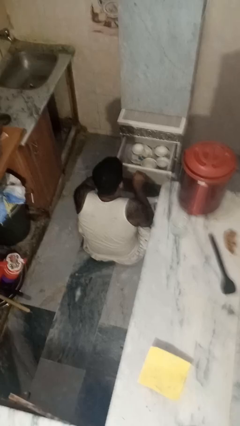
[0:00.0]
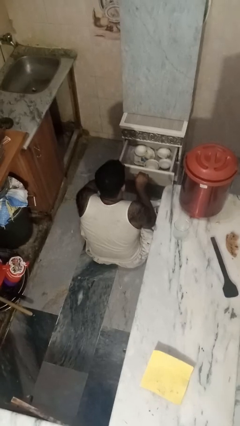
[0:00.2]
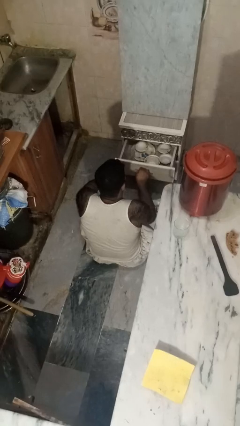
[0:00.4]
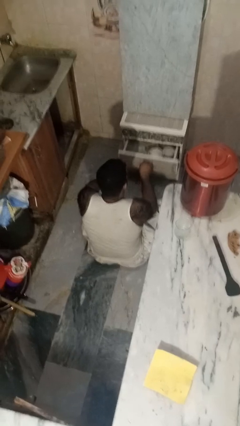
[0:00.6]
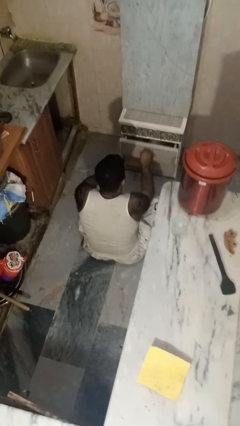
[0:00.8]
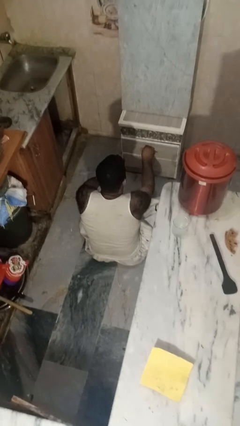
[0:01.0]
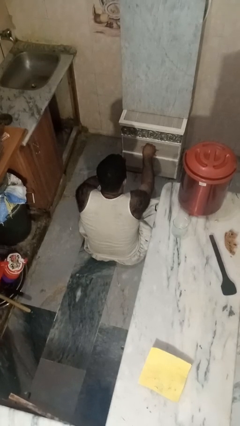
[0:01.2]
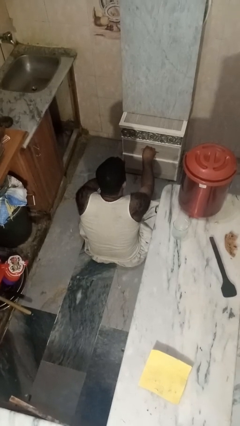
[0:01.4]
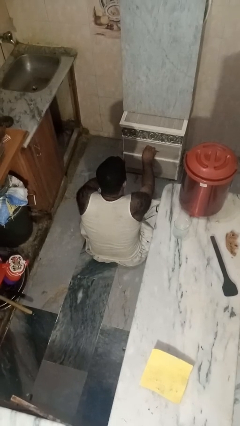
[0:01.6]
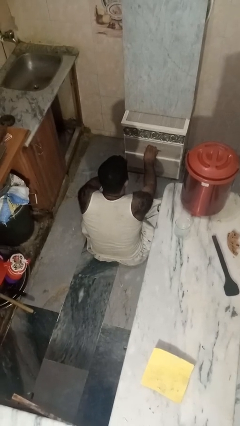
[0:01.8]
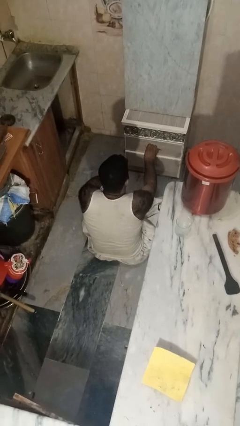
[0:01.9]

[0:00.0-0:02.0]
person closes kitchen drawer

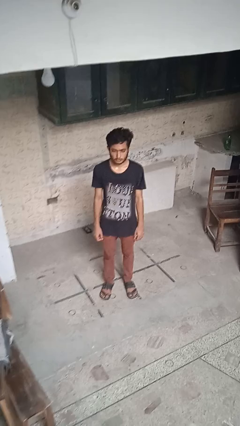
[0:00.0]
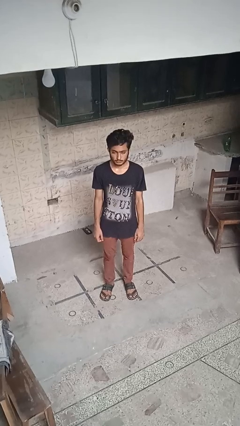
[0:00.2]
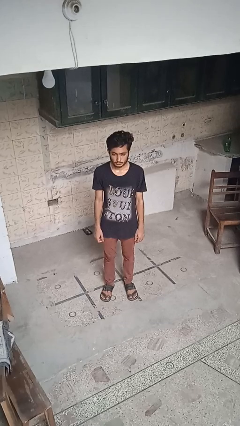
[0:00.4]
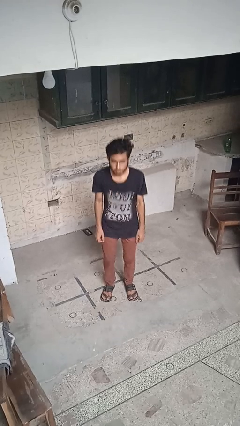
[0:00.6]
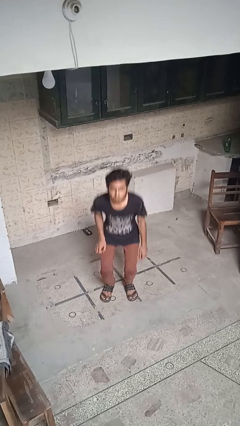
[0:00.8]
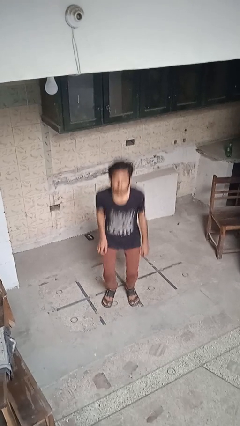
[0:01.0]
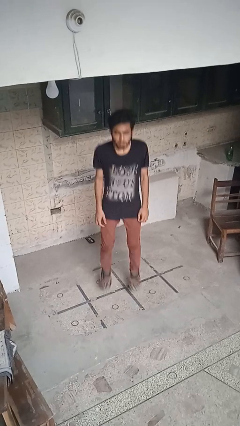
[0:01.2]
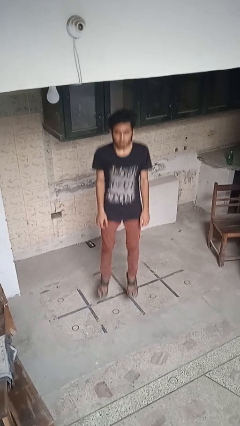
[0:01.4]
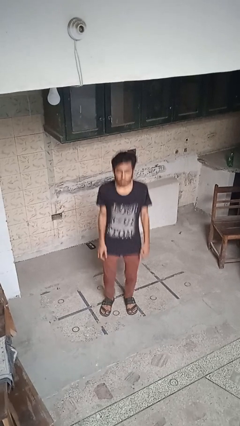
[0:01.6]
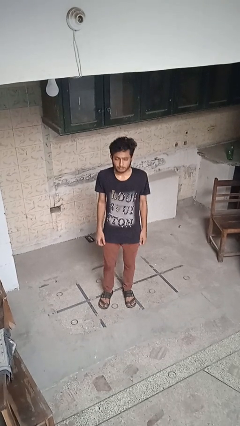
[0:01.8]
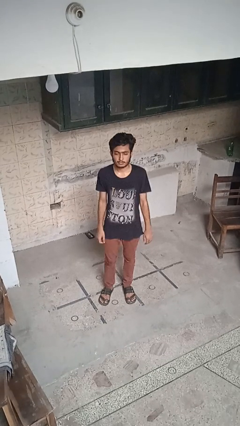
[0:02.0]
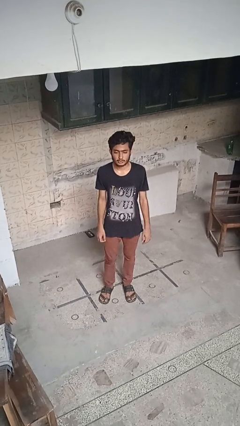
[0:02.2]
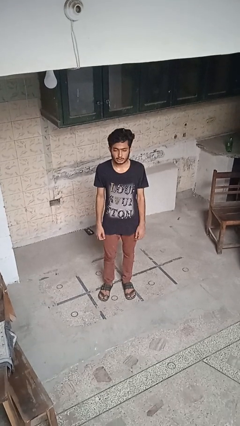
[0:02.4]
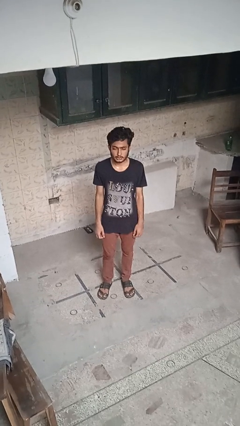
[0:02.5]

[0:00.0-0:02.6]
person jumps

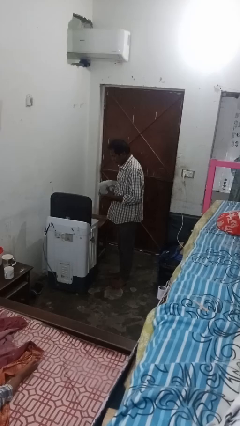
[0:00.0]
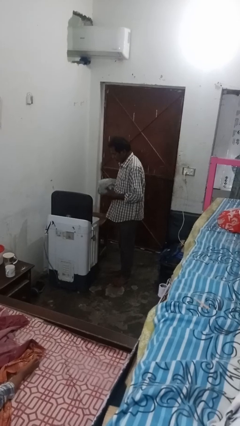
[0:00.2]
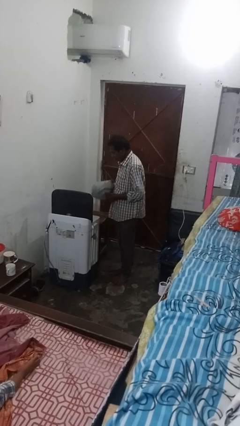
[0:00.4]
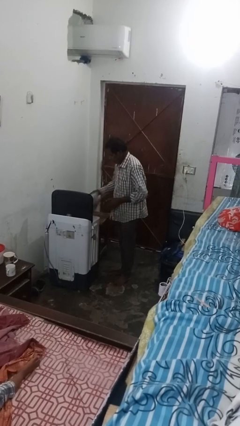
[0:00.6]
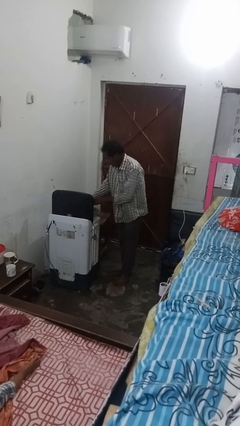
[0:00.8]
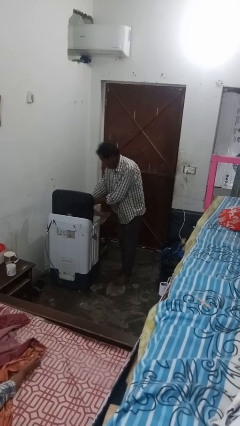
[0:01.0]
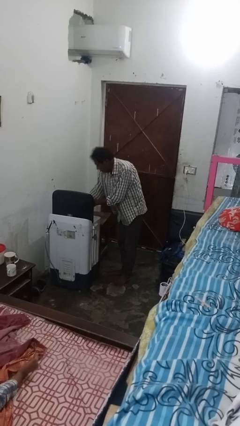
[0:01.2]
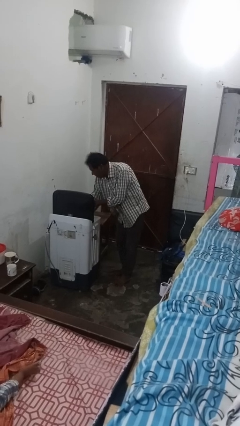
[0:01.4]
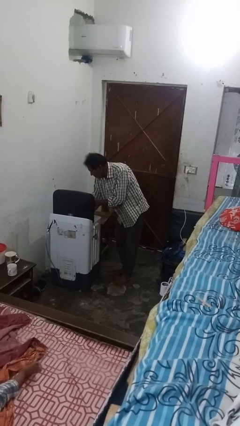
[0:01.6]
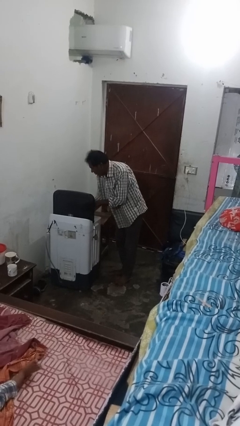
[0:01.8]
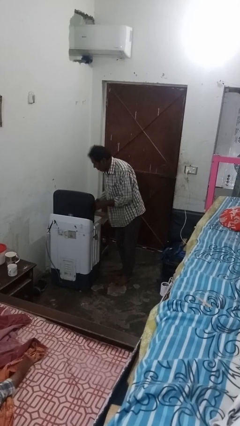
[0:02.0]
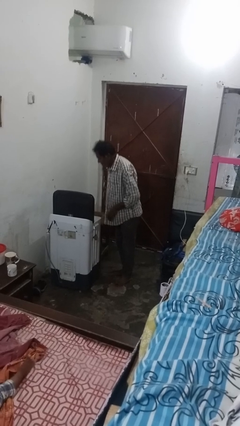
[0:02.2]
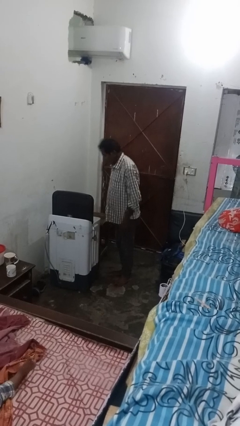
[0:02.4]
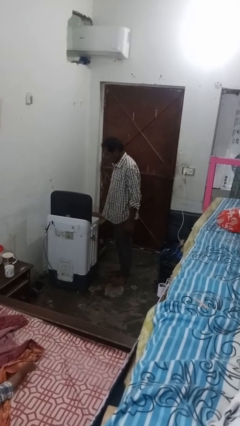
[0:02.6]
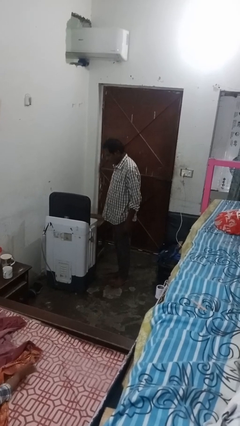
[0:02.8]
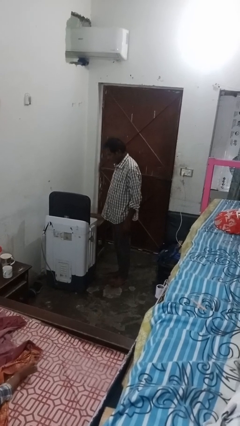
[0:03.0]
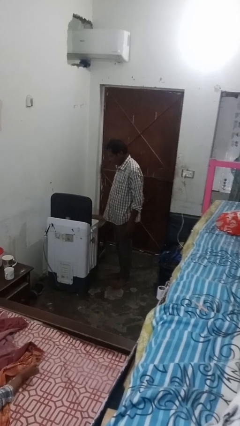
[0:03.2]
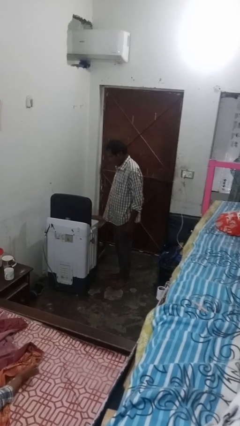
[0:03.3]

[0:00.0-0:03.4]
person loads dryer

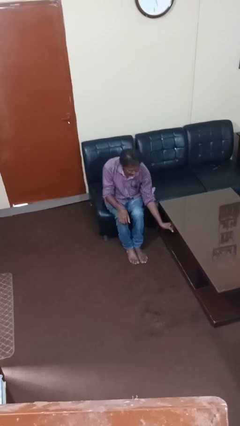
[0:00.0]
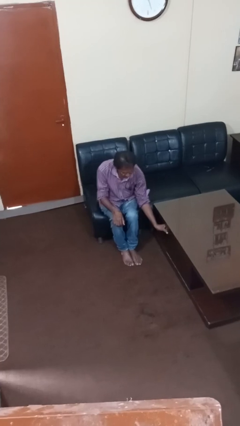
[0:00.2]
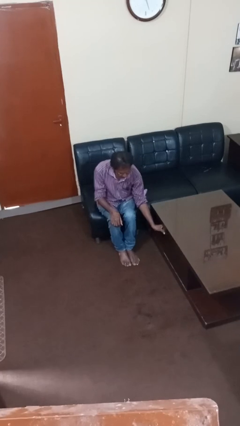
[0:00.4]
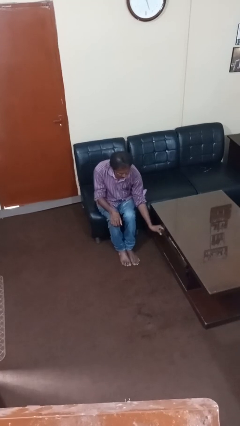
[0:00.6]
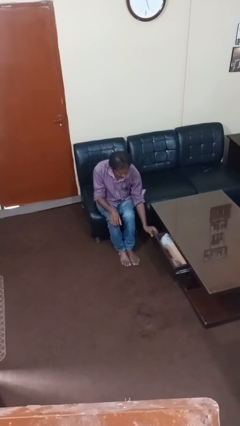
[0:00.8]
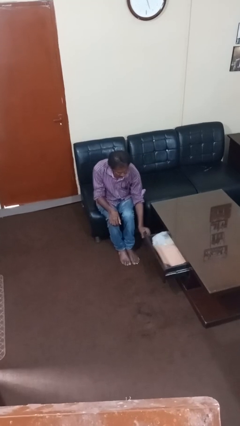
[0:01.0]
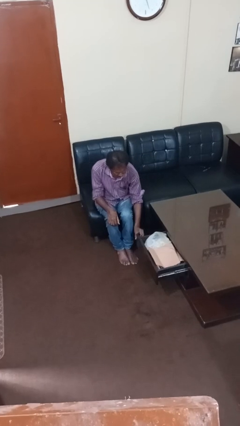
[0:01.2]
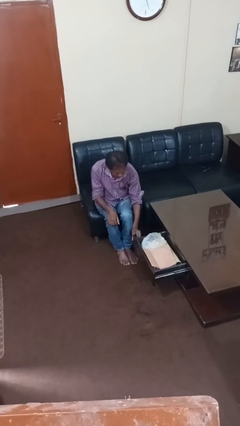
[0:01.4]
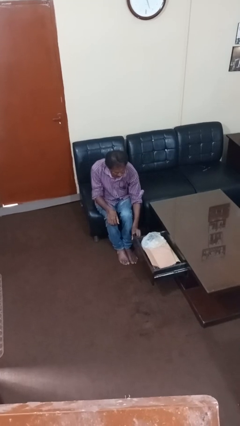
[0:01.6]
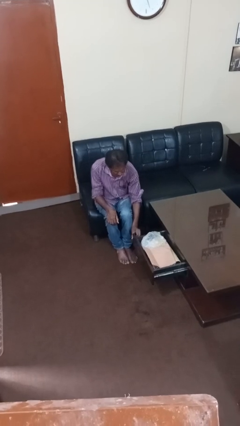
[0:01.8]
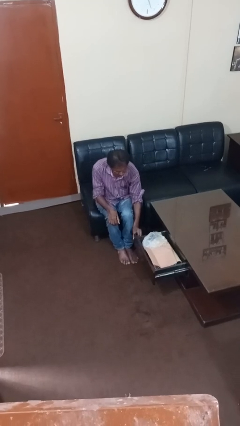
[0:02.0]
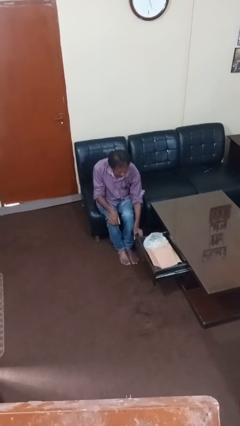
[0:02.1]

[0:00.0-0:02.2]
person opens dresser drawer

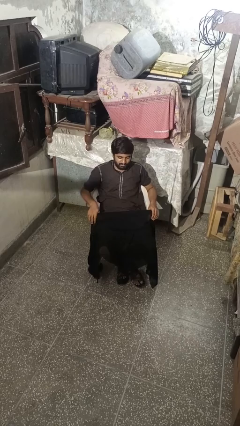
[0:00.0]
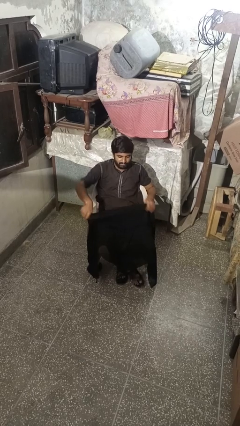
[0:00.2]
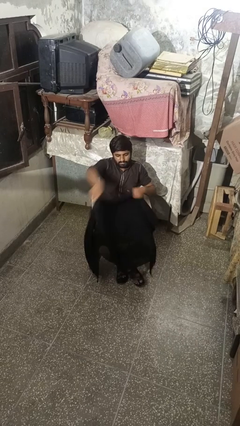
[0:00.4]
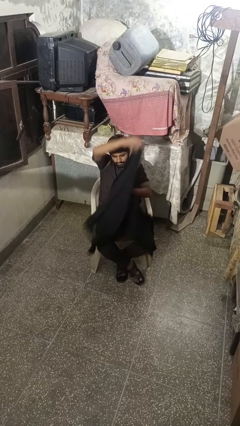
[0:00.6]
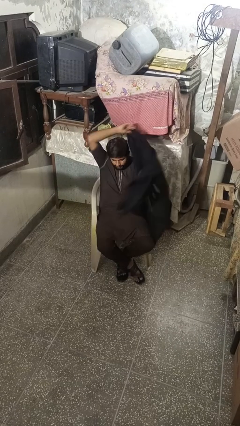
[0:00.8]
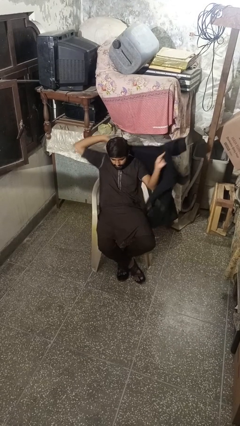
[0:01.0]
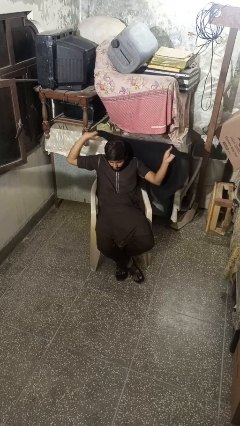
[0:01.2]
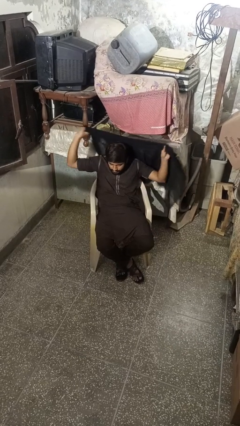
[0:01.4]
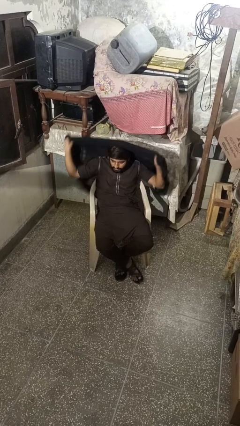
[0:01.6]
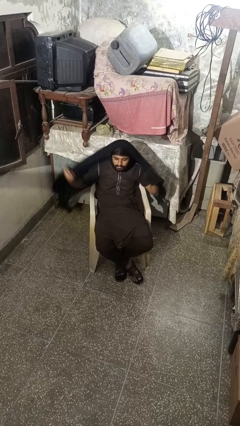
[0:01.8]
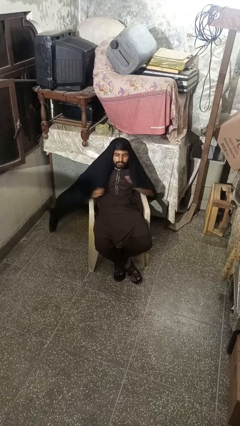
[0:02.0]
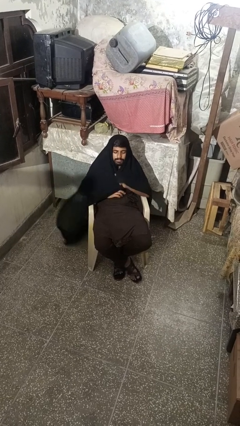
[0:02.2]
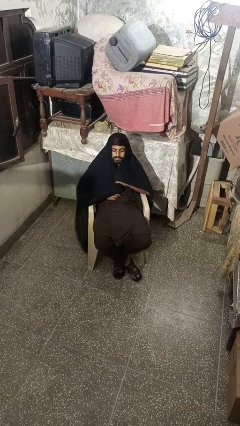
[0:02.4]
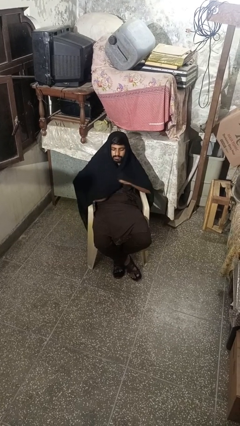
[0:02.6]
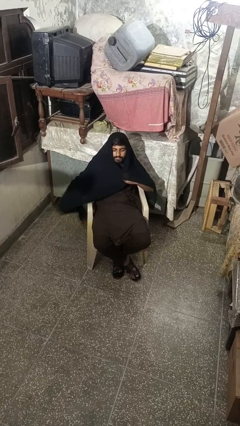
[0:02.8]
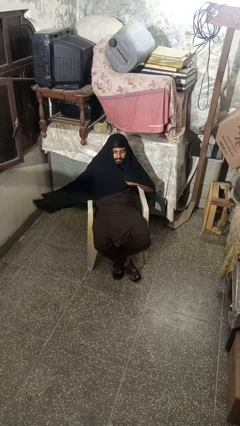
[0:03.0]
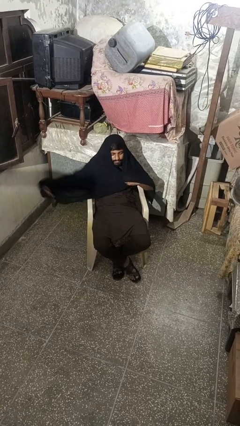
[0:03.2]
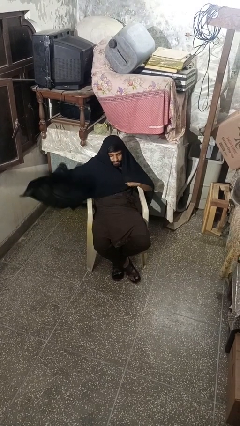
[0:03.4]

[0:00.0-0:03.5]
person puts on scarf

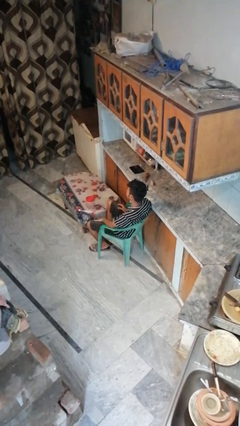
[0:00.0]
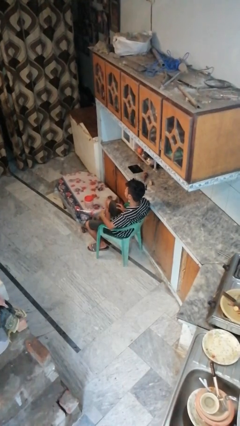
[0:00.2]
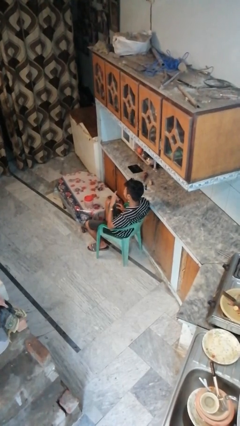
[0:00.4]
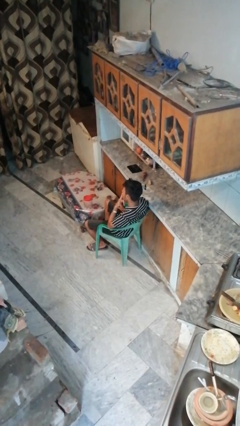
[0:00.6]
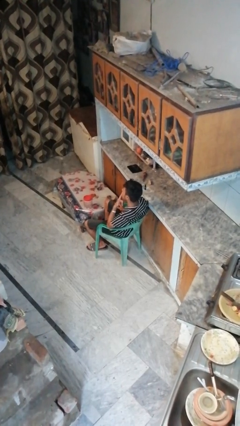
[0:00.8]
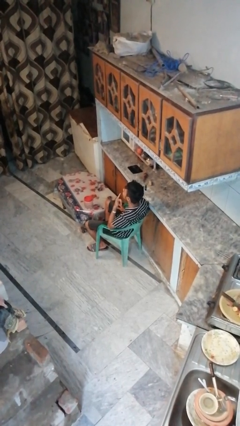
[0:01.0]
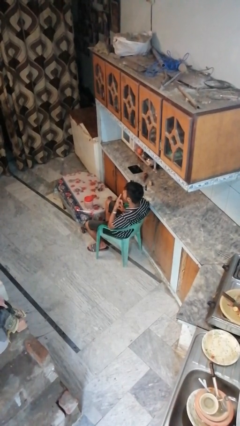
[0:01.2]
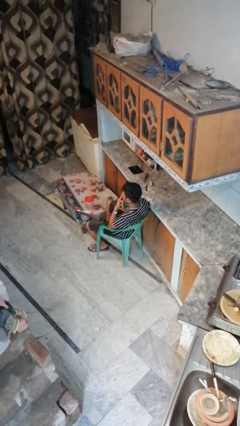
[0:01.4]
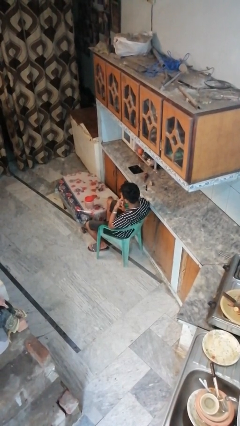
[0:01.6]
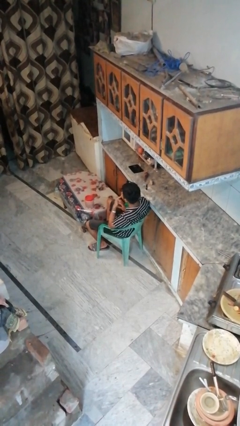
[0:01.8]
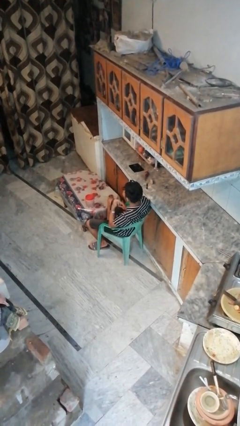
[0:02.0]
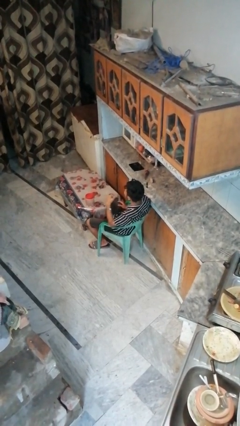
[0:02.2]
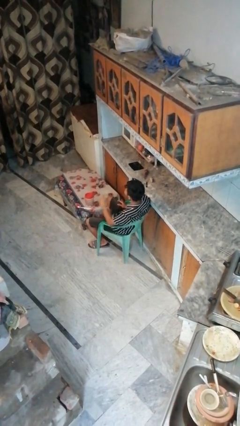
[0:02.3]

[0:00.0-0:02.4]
person licks fingers

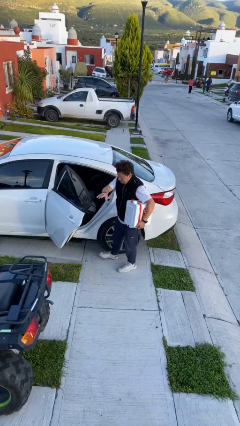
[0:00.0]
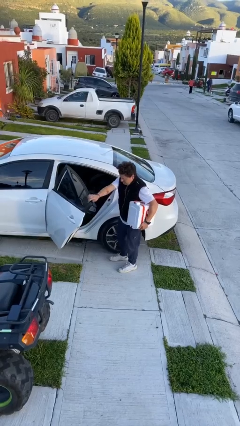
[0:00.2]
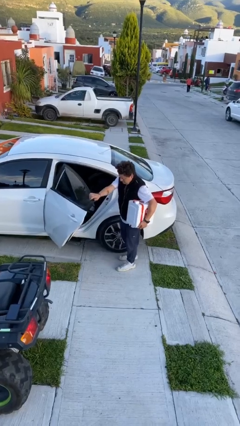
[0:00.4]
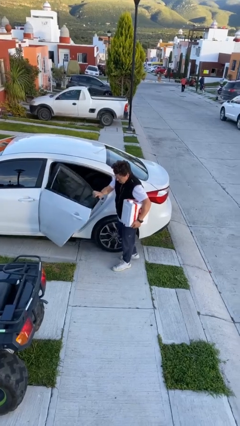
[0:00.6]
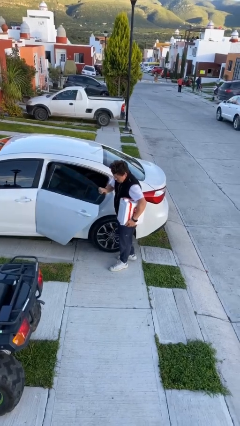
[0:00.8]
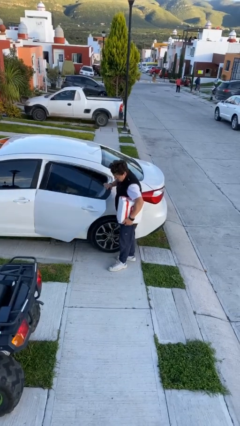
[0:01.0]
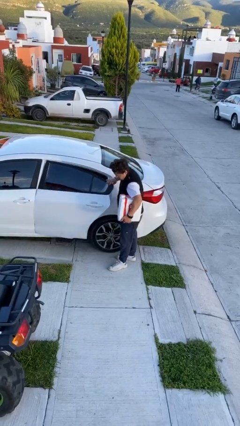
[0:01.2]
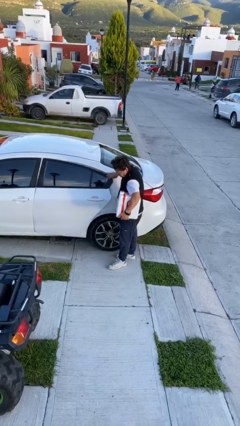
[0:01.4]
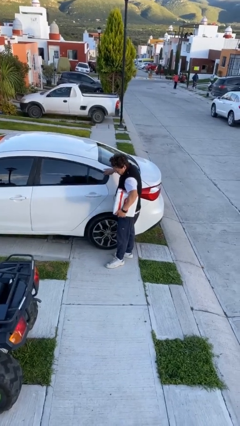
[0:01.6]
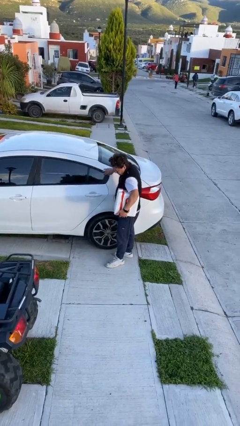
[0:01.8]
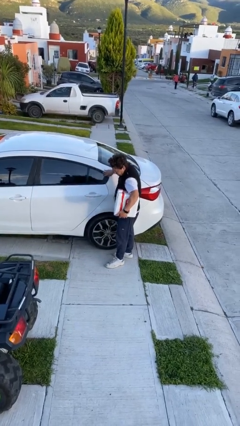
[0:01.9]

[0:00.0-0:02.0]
person closes car door
